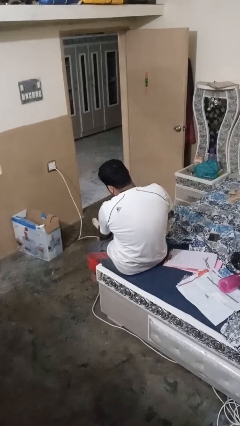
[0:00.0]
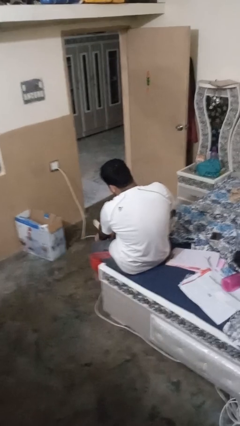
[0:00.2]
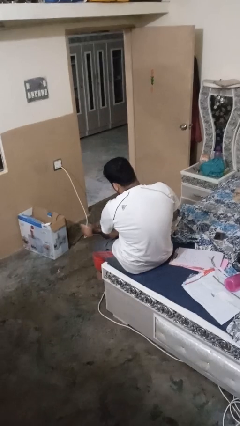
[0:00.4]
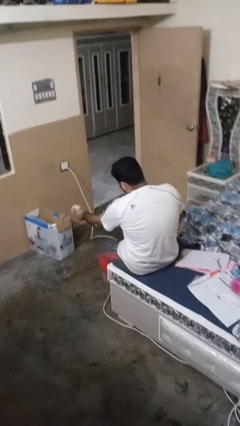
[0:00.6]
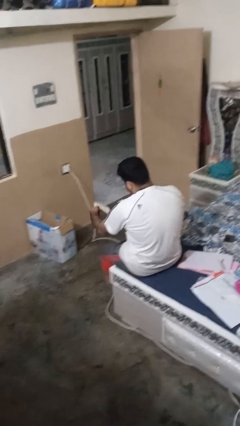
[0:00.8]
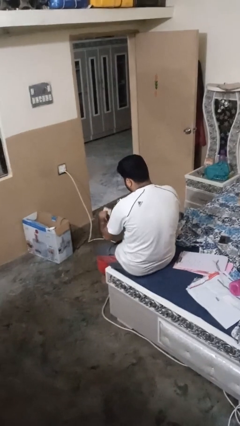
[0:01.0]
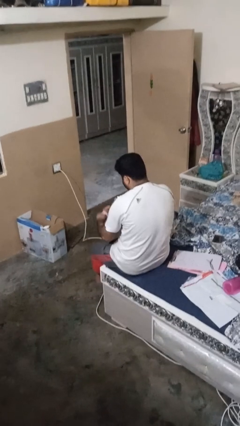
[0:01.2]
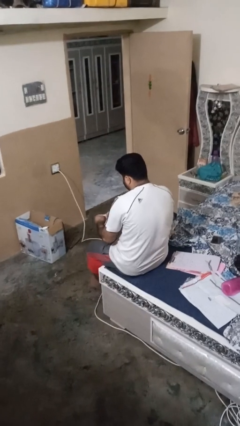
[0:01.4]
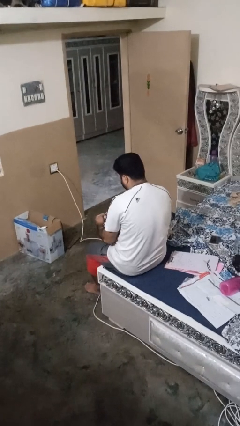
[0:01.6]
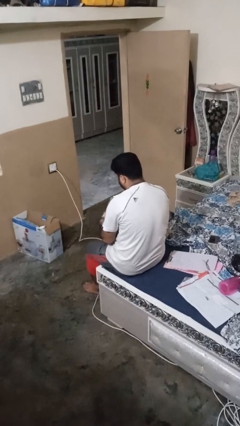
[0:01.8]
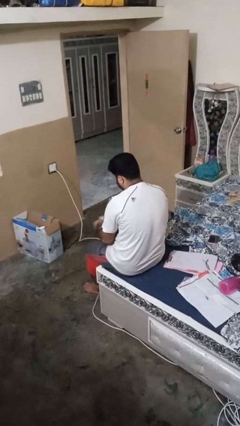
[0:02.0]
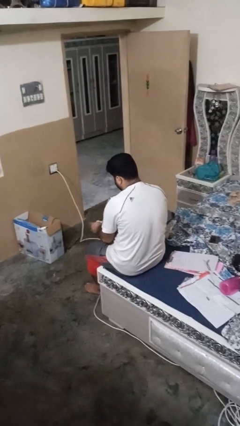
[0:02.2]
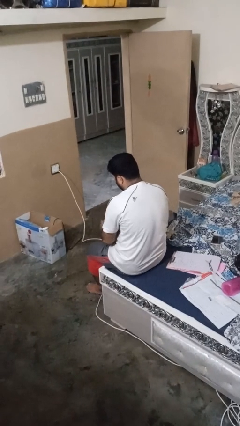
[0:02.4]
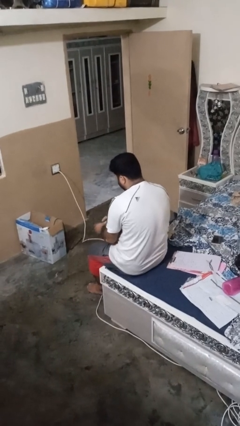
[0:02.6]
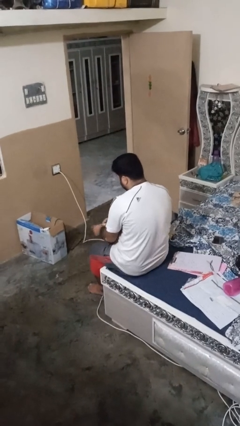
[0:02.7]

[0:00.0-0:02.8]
person takes off socks

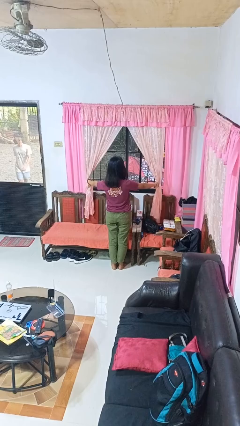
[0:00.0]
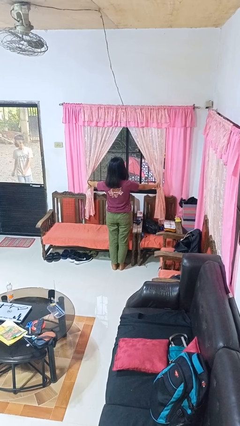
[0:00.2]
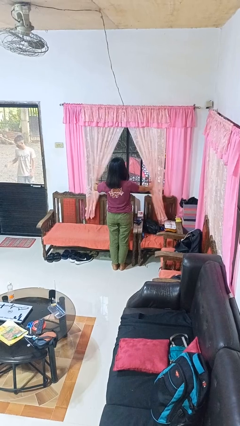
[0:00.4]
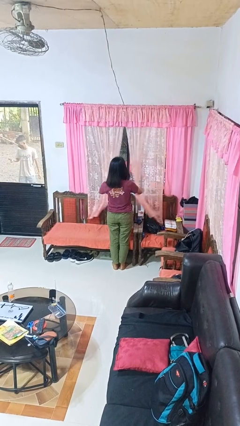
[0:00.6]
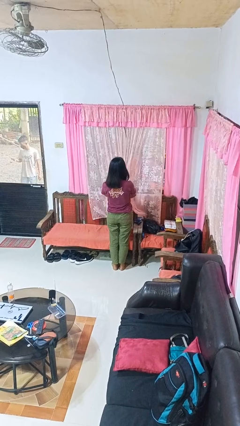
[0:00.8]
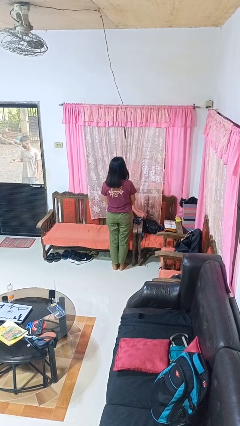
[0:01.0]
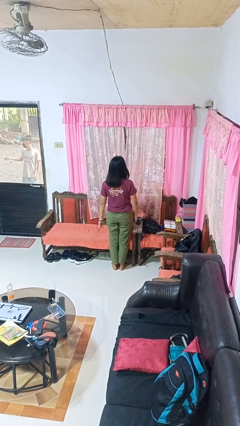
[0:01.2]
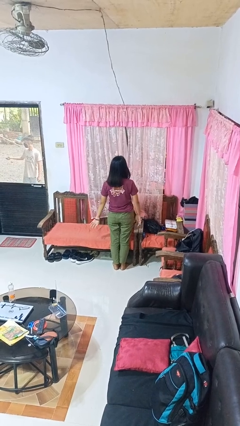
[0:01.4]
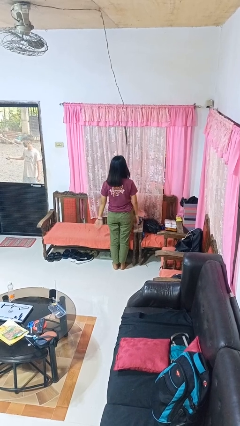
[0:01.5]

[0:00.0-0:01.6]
person closes curtains

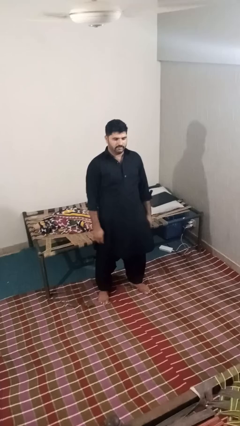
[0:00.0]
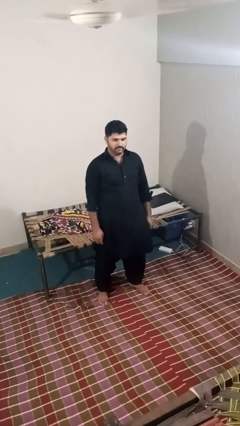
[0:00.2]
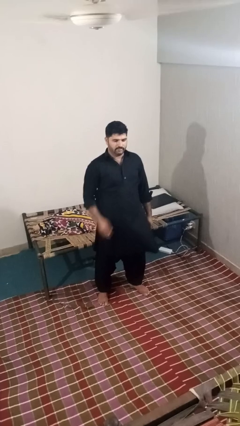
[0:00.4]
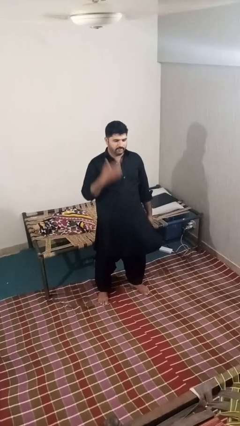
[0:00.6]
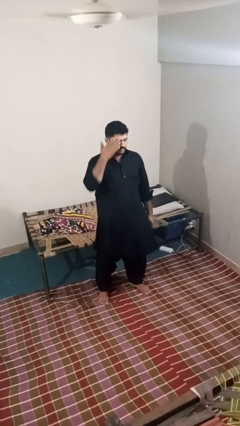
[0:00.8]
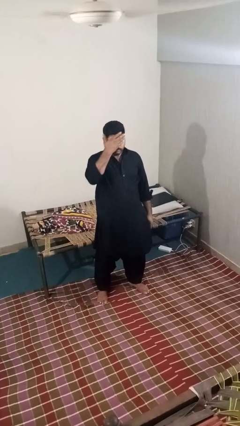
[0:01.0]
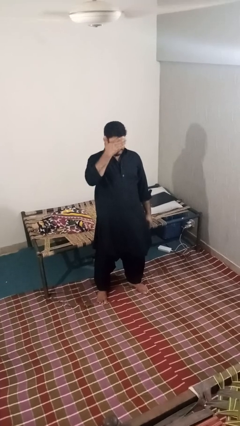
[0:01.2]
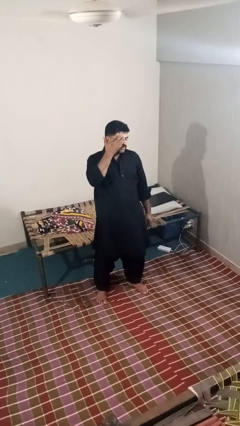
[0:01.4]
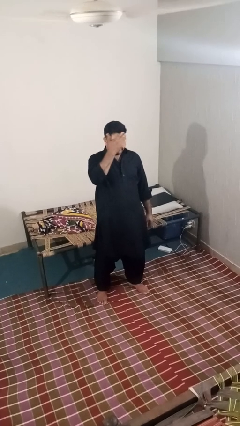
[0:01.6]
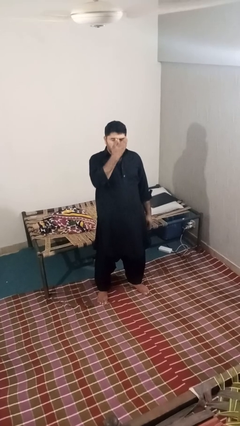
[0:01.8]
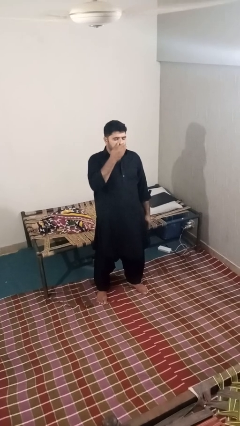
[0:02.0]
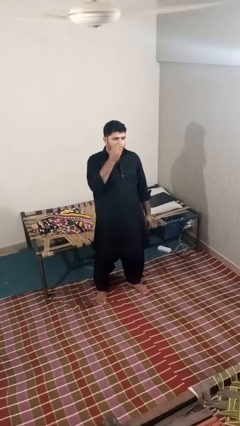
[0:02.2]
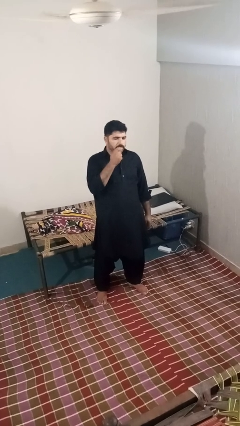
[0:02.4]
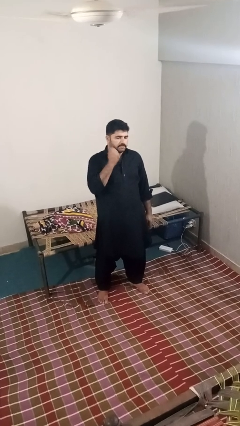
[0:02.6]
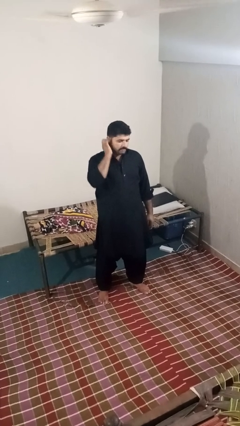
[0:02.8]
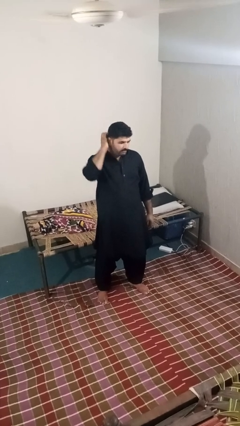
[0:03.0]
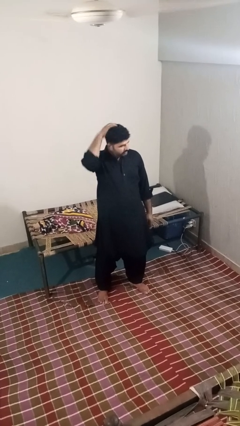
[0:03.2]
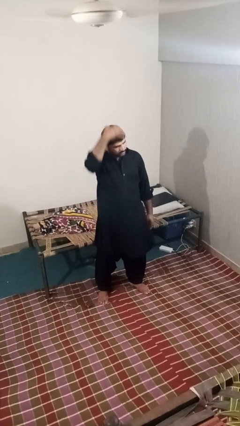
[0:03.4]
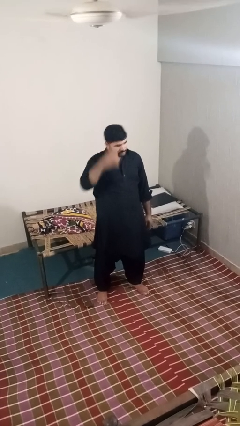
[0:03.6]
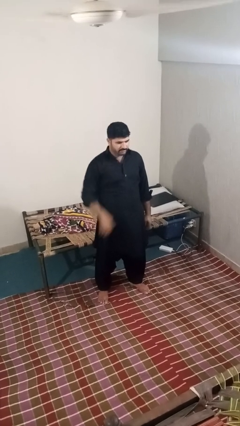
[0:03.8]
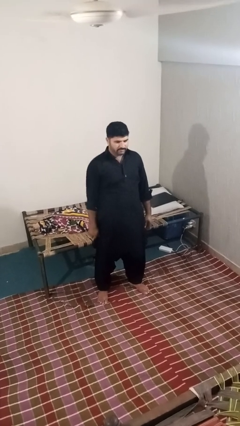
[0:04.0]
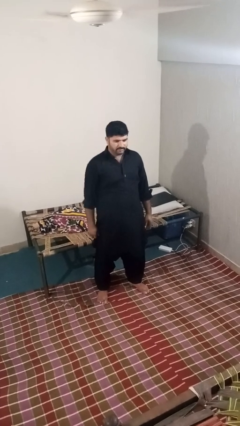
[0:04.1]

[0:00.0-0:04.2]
person scratches face

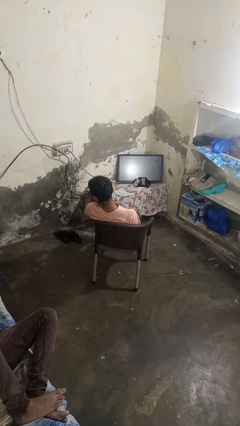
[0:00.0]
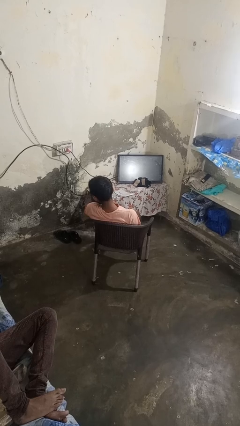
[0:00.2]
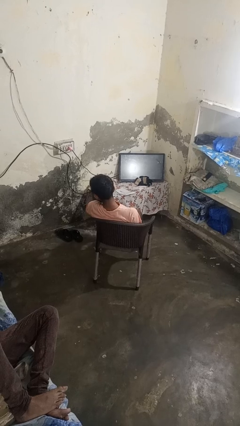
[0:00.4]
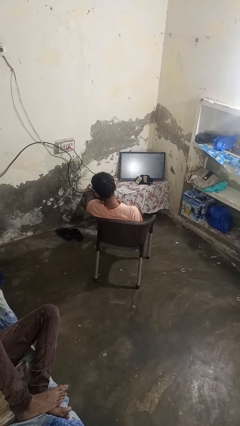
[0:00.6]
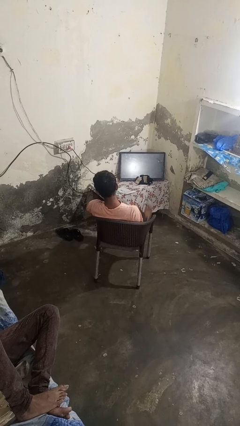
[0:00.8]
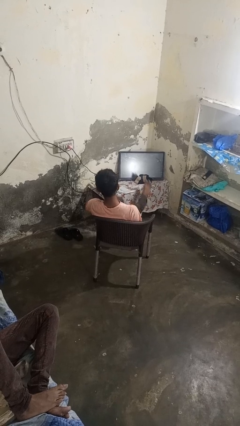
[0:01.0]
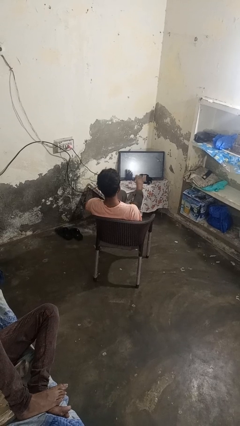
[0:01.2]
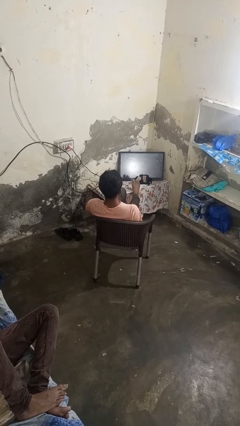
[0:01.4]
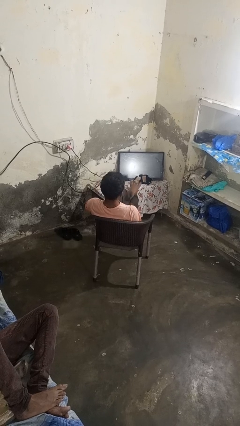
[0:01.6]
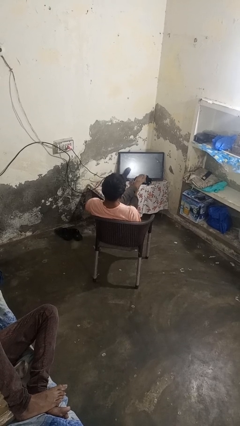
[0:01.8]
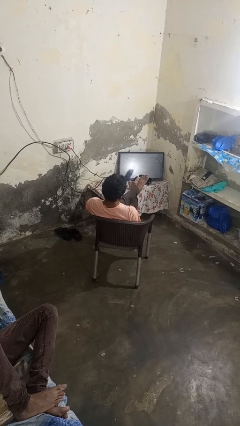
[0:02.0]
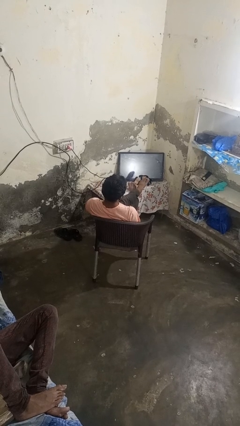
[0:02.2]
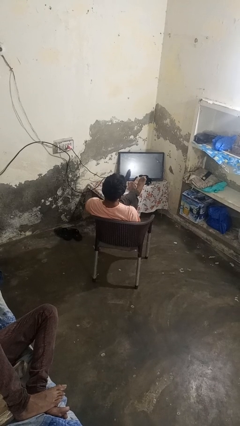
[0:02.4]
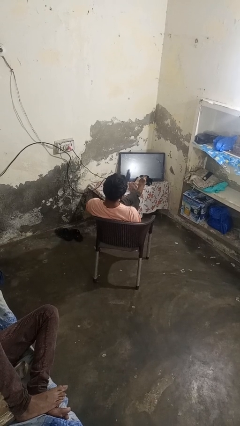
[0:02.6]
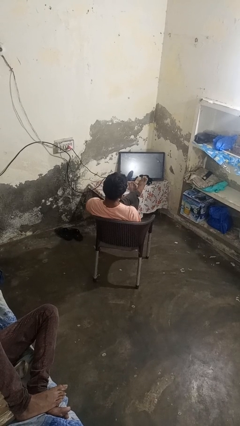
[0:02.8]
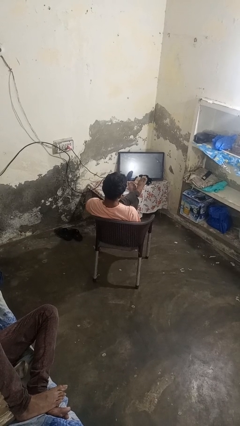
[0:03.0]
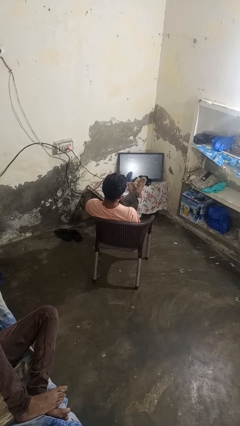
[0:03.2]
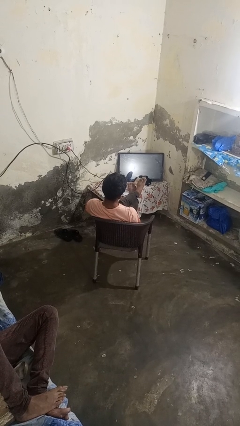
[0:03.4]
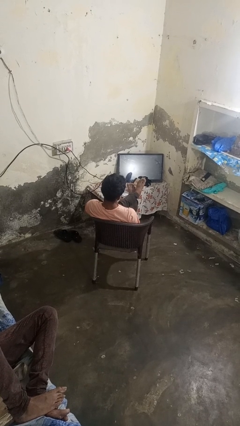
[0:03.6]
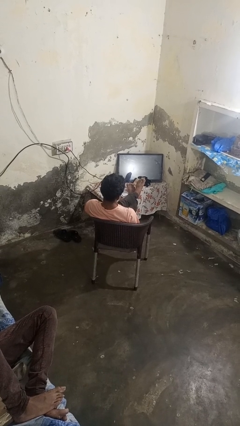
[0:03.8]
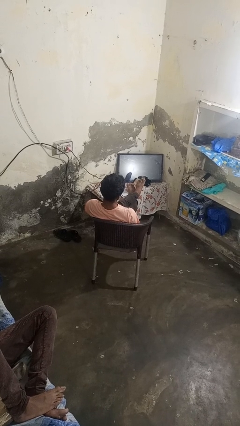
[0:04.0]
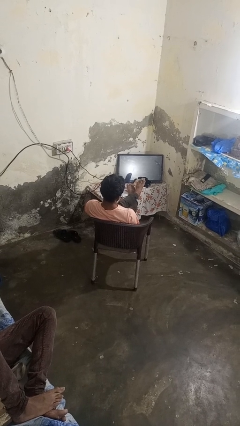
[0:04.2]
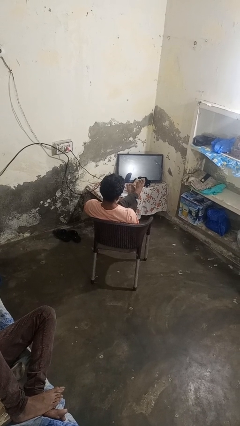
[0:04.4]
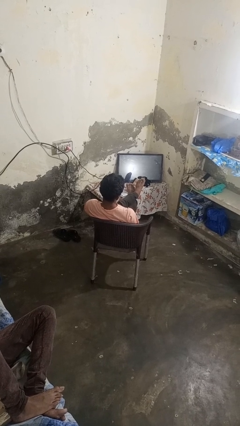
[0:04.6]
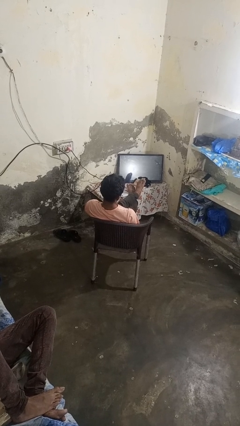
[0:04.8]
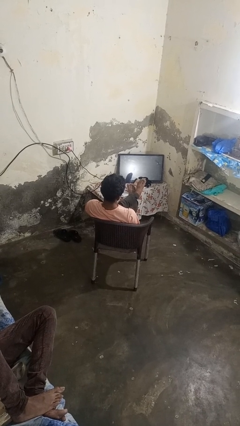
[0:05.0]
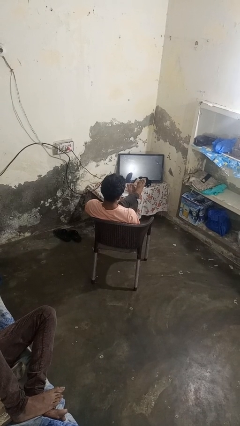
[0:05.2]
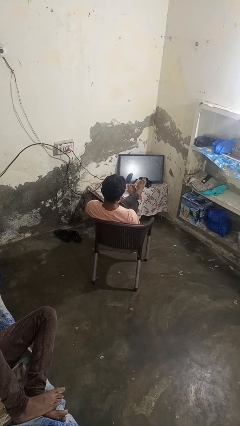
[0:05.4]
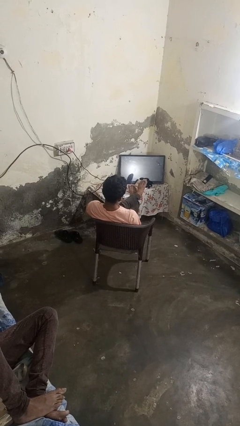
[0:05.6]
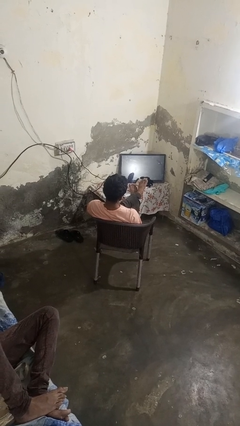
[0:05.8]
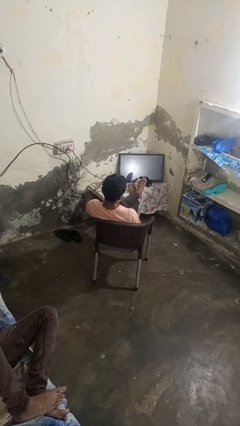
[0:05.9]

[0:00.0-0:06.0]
person puts feet up

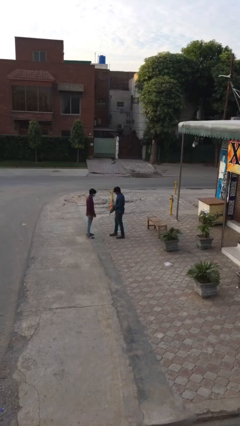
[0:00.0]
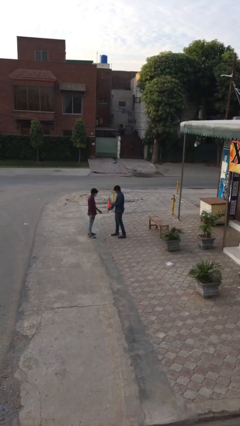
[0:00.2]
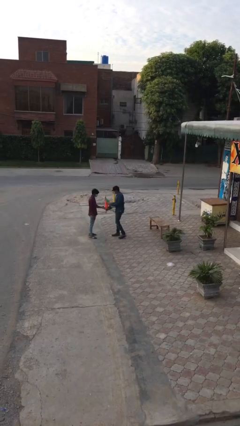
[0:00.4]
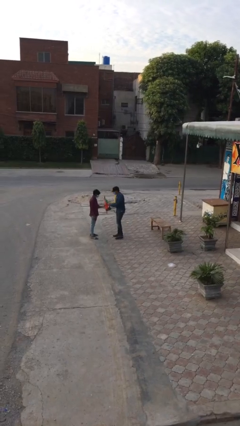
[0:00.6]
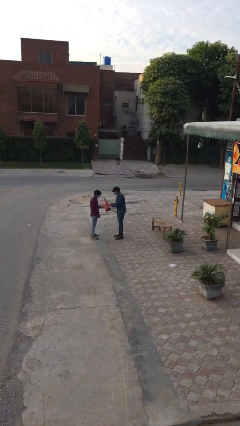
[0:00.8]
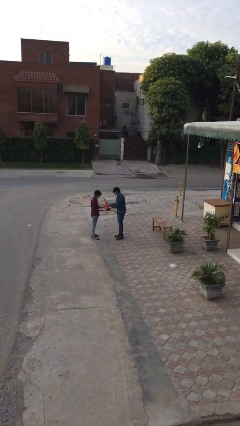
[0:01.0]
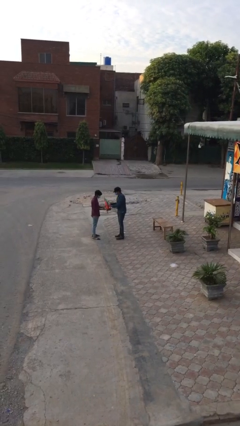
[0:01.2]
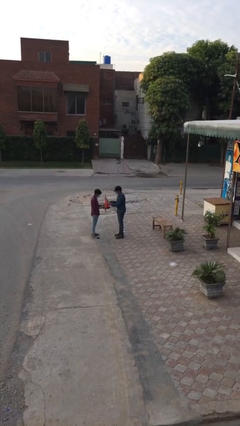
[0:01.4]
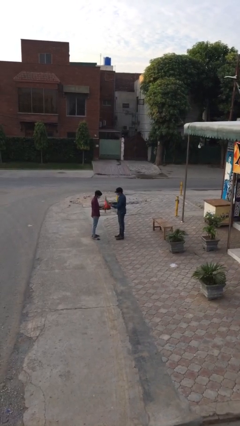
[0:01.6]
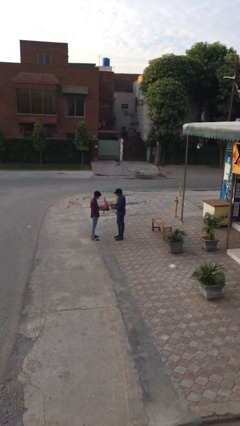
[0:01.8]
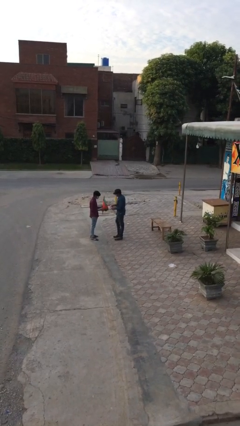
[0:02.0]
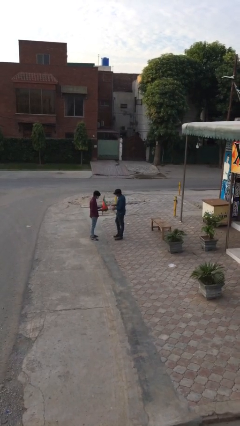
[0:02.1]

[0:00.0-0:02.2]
person transfers object to person

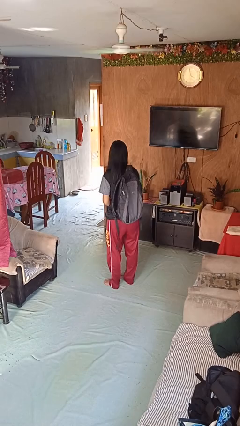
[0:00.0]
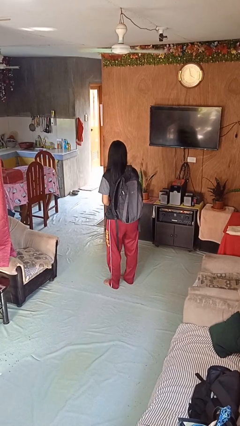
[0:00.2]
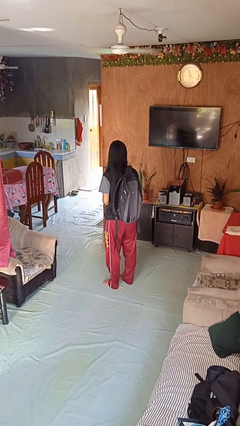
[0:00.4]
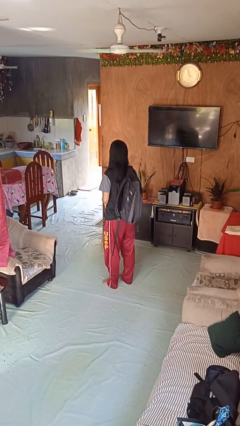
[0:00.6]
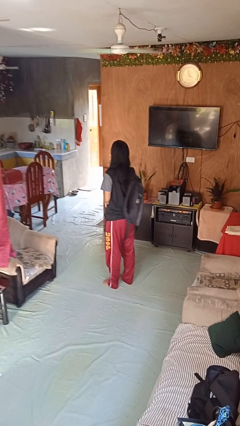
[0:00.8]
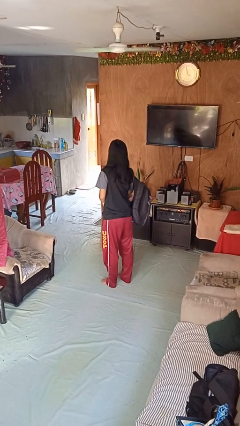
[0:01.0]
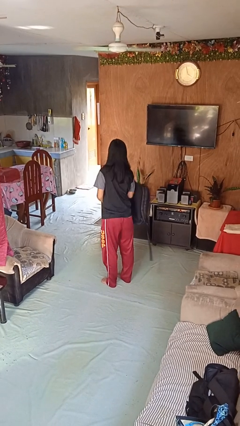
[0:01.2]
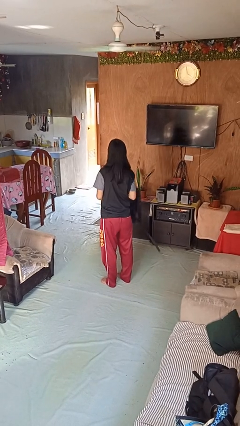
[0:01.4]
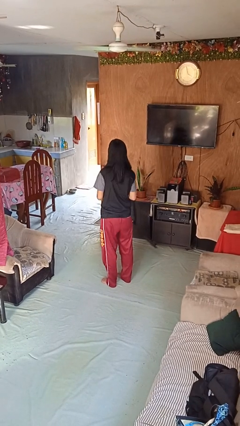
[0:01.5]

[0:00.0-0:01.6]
person takes off backpack
